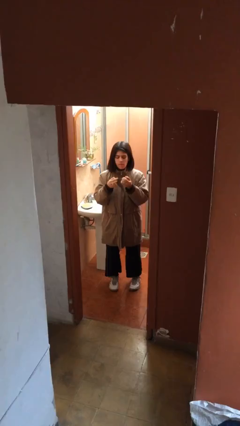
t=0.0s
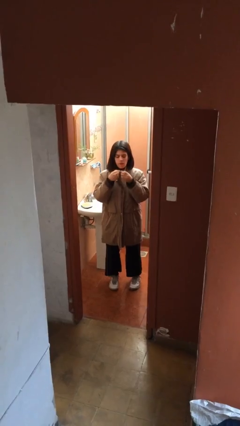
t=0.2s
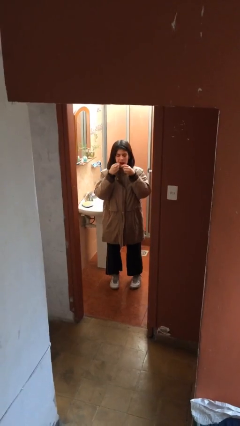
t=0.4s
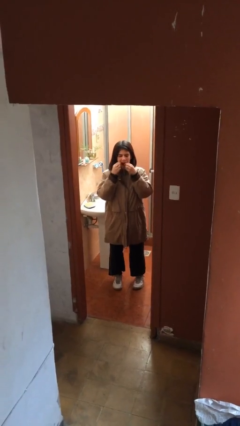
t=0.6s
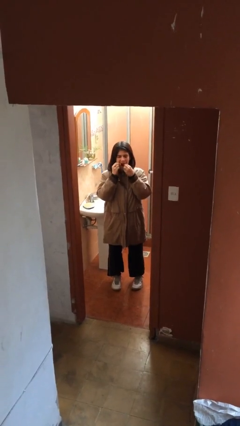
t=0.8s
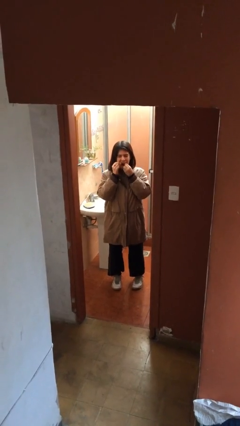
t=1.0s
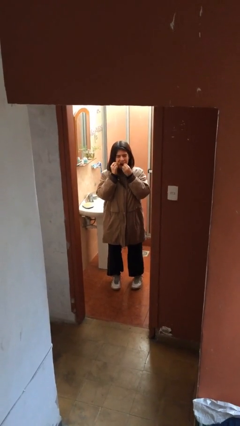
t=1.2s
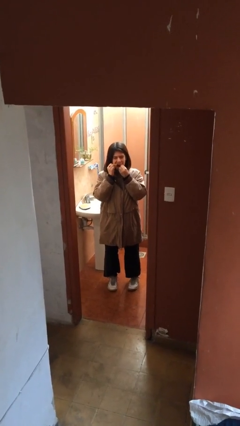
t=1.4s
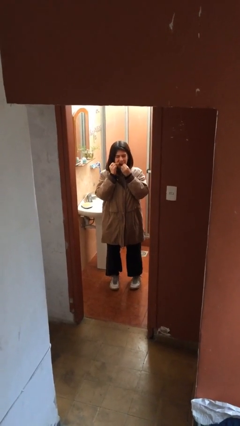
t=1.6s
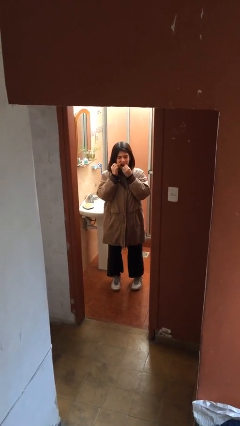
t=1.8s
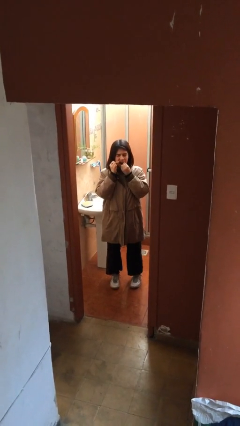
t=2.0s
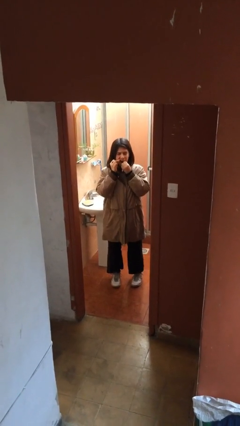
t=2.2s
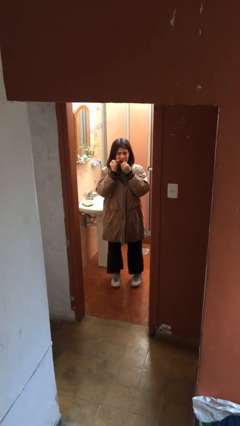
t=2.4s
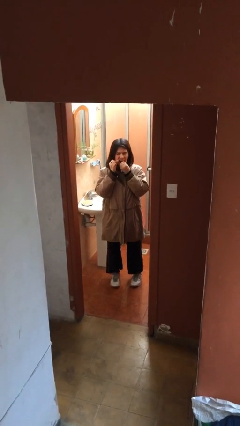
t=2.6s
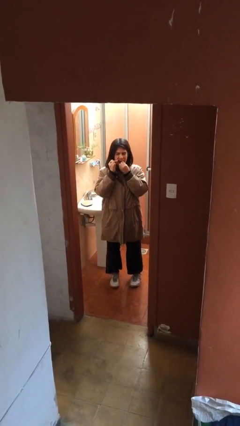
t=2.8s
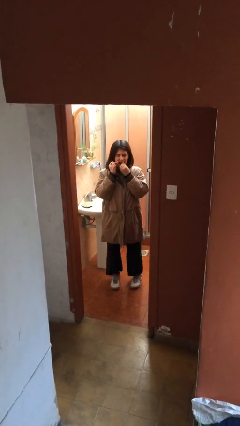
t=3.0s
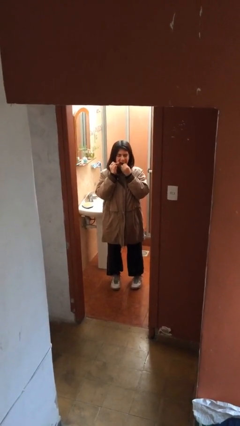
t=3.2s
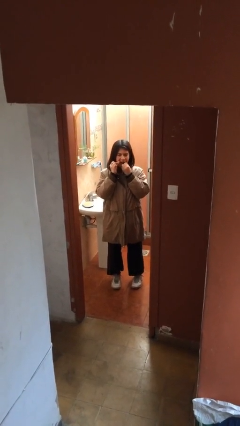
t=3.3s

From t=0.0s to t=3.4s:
person flosses

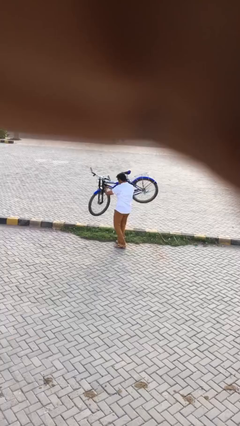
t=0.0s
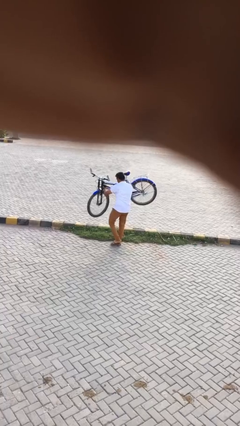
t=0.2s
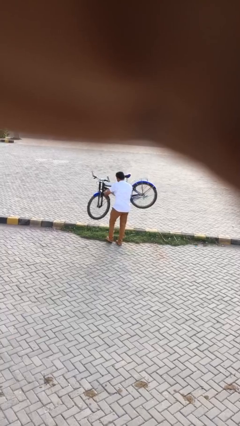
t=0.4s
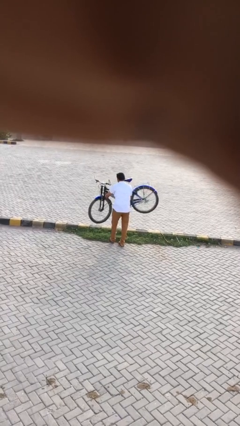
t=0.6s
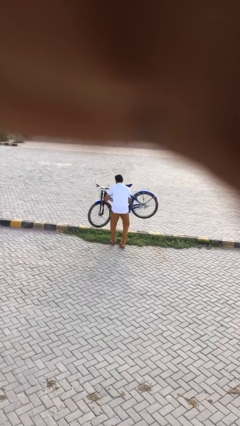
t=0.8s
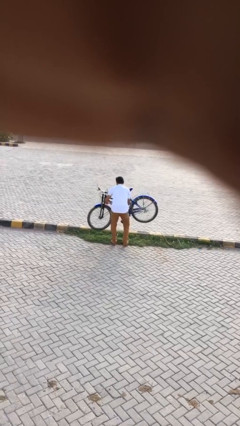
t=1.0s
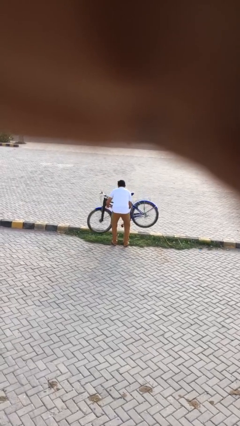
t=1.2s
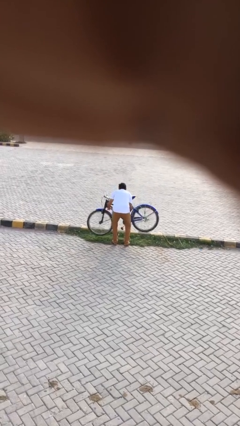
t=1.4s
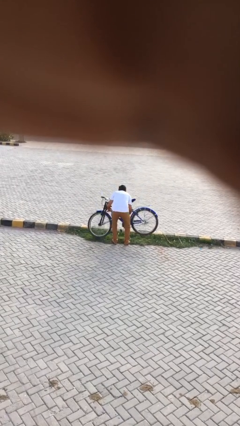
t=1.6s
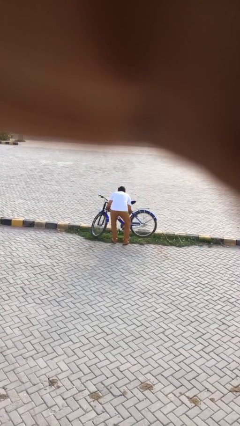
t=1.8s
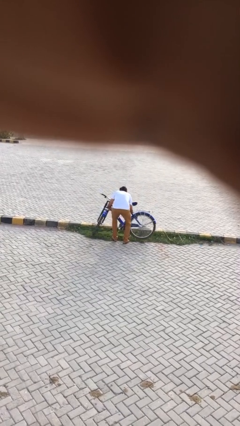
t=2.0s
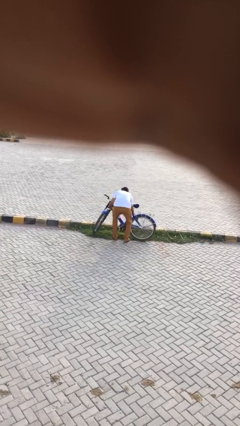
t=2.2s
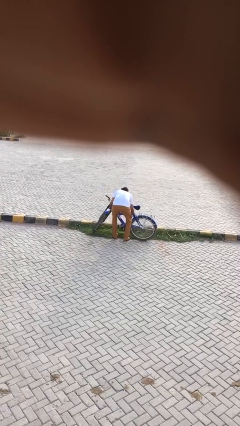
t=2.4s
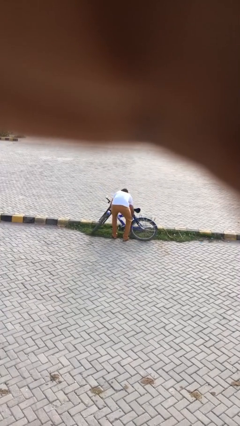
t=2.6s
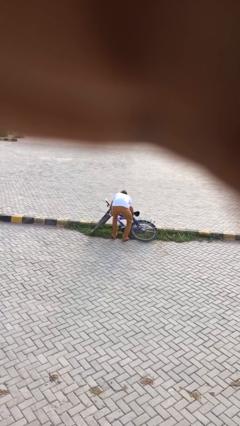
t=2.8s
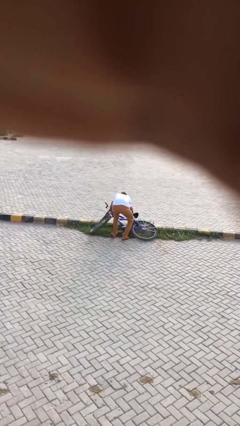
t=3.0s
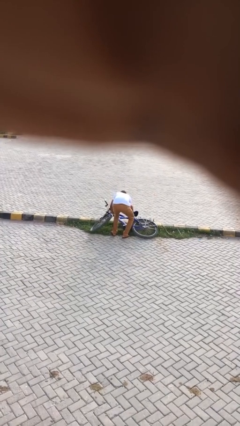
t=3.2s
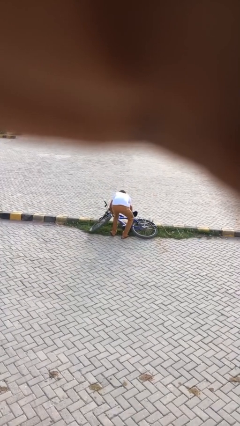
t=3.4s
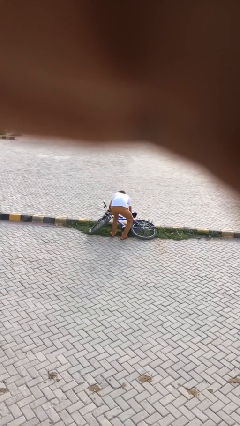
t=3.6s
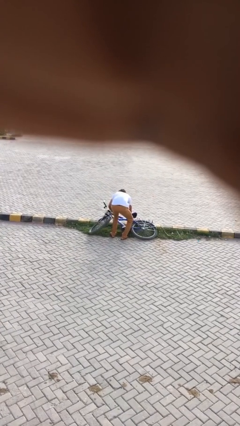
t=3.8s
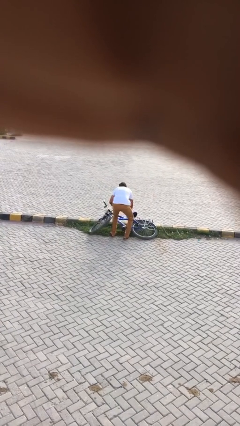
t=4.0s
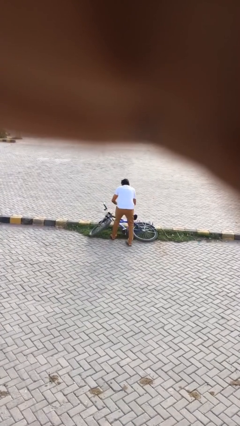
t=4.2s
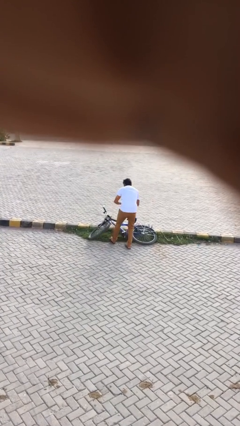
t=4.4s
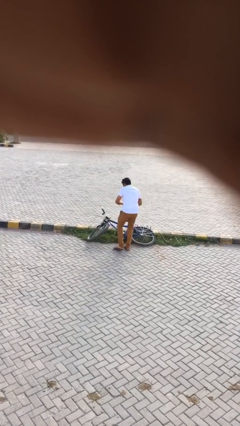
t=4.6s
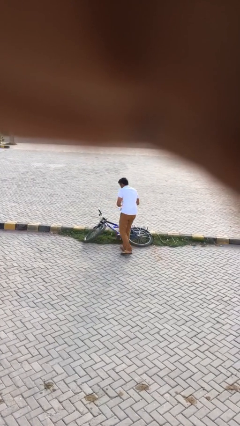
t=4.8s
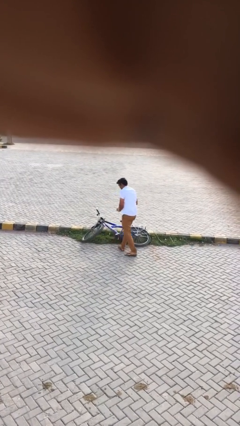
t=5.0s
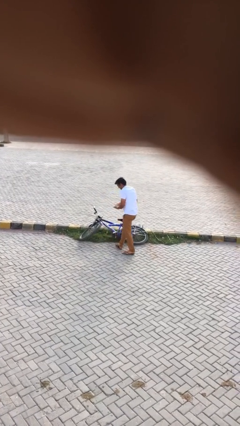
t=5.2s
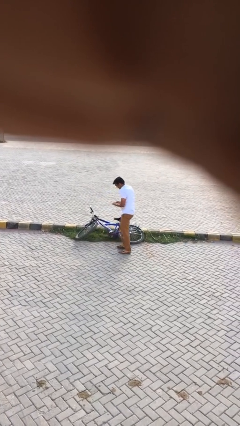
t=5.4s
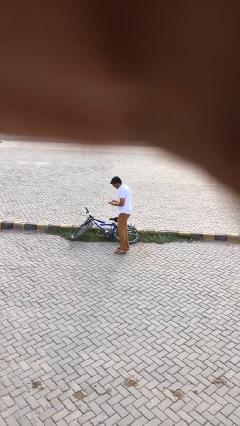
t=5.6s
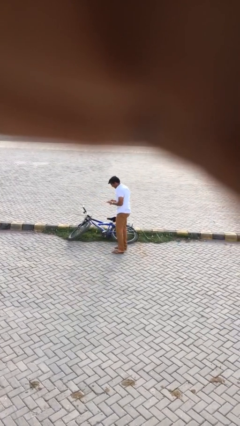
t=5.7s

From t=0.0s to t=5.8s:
person puts down object on floor

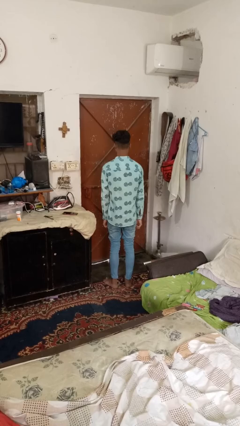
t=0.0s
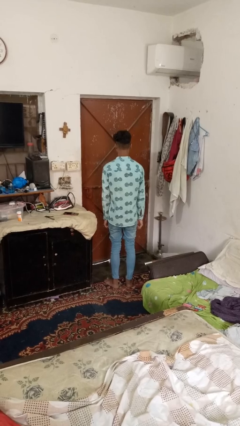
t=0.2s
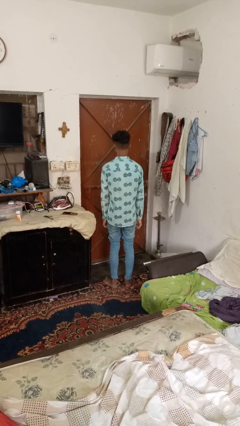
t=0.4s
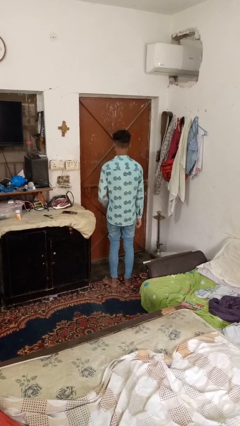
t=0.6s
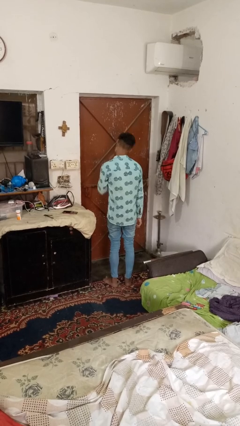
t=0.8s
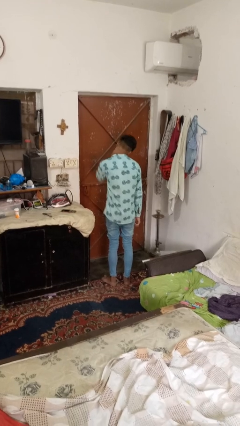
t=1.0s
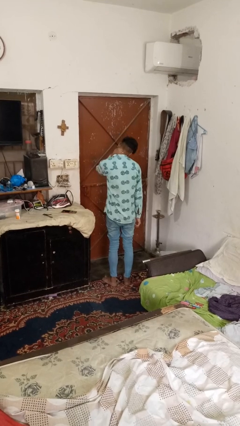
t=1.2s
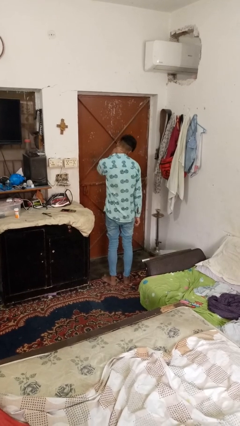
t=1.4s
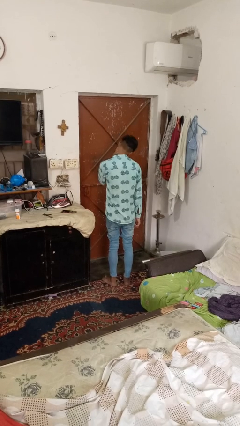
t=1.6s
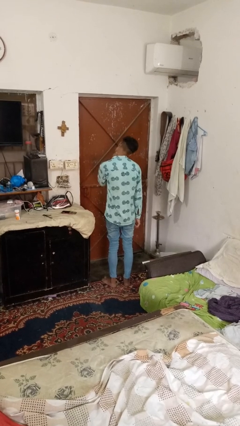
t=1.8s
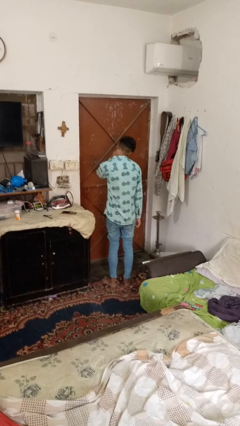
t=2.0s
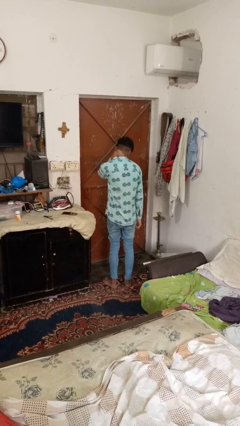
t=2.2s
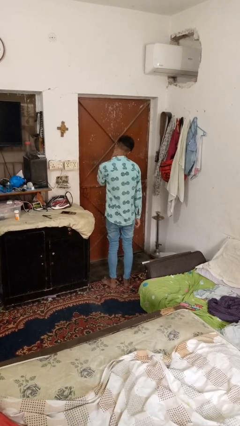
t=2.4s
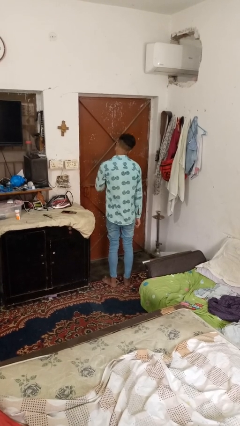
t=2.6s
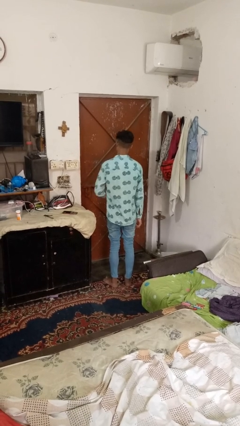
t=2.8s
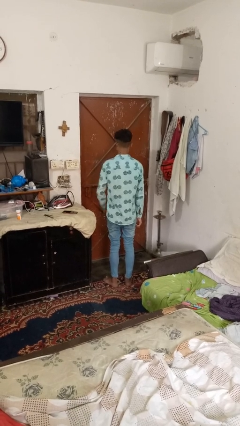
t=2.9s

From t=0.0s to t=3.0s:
person rubs neck

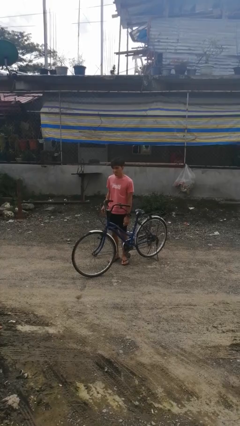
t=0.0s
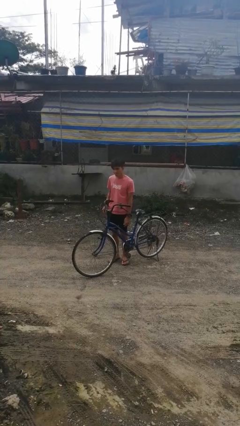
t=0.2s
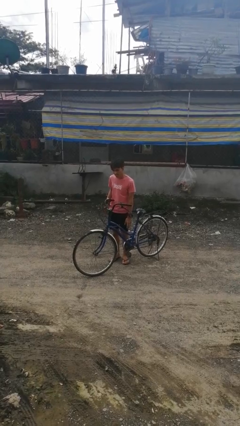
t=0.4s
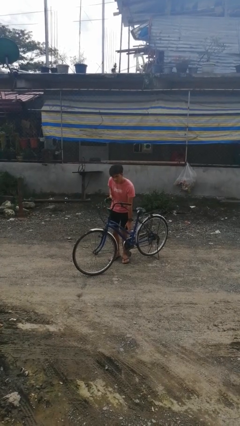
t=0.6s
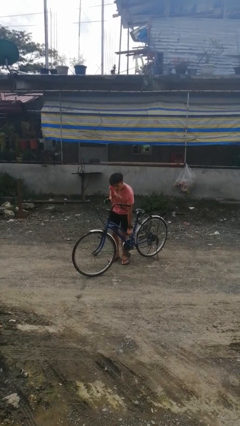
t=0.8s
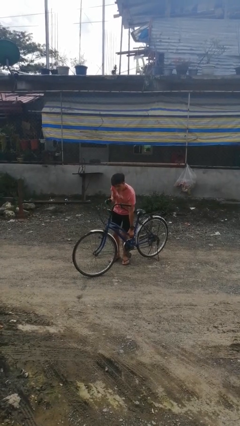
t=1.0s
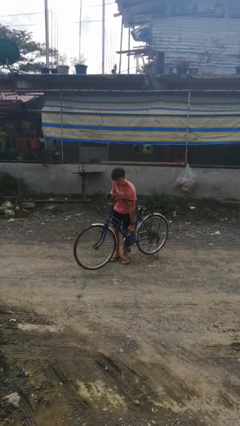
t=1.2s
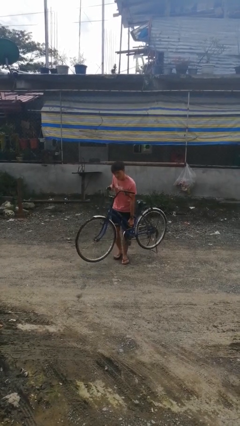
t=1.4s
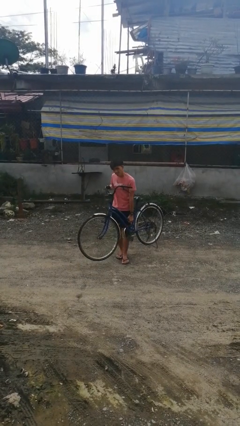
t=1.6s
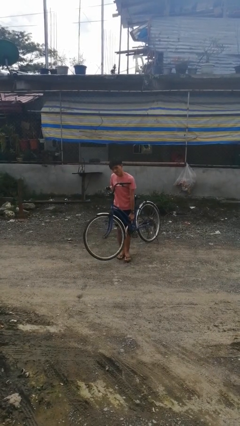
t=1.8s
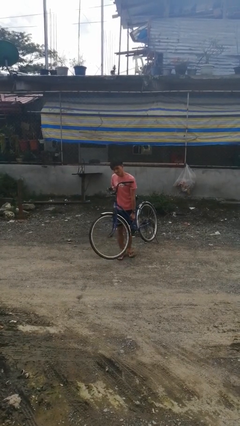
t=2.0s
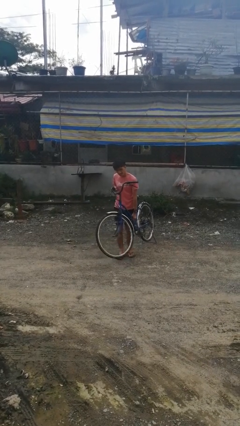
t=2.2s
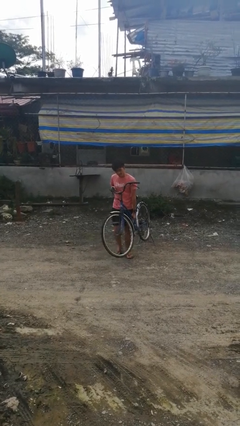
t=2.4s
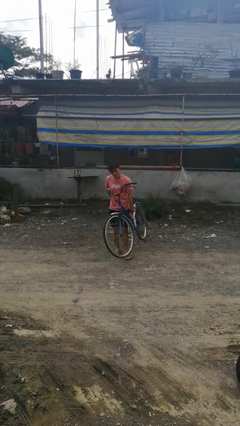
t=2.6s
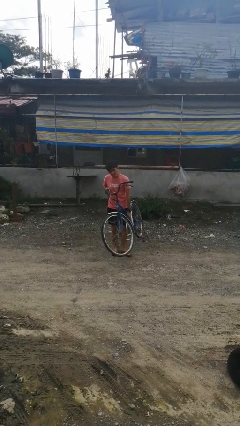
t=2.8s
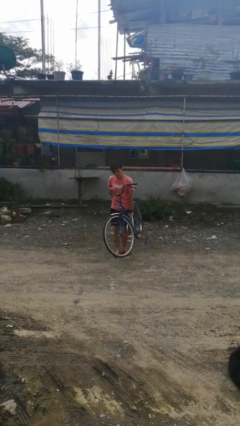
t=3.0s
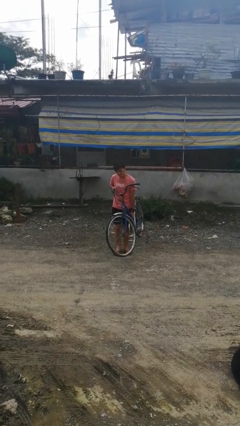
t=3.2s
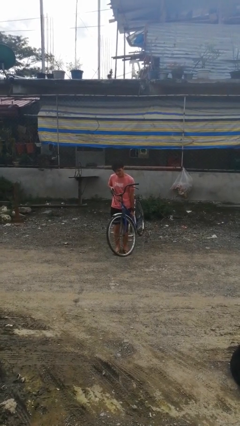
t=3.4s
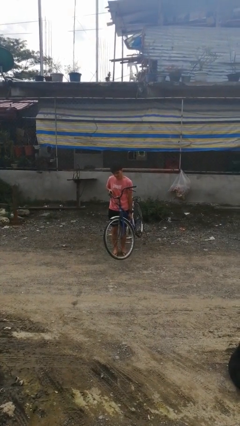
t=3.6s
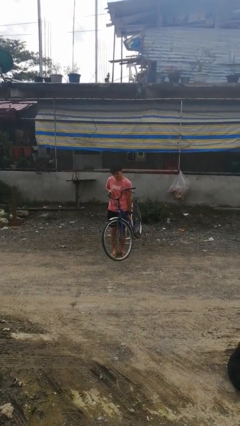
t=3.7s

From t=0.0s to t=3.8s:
person carries bicycle

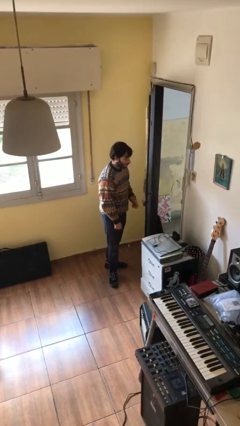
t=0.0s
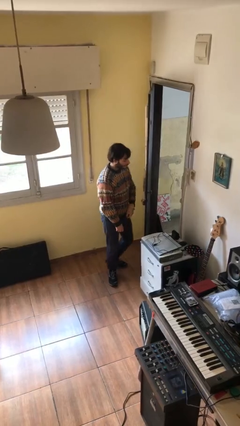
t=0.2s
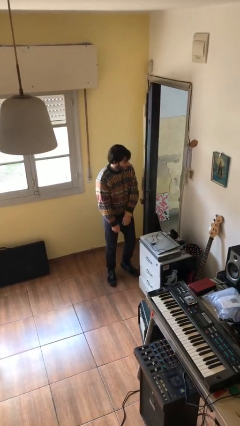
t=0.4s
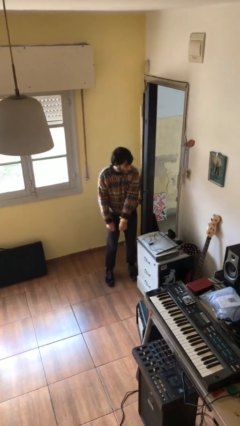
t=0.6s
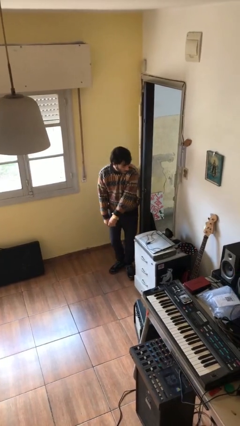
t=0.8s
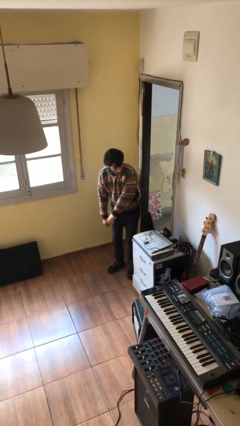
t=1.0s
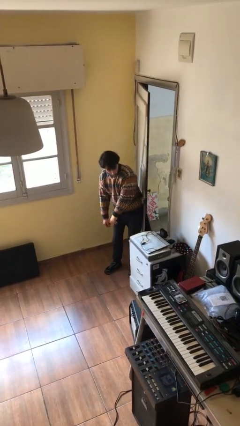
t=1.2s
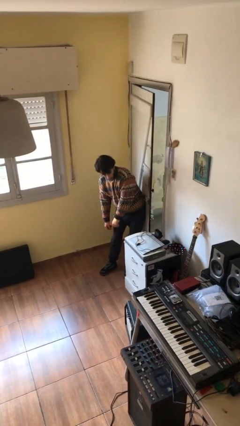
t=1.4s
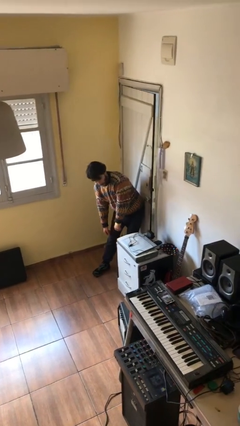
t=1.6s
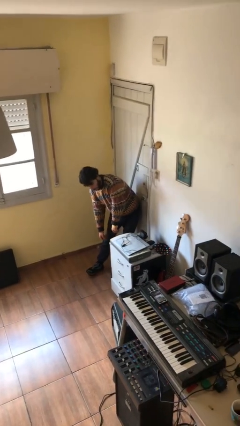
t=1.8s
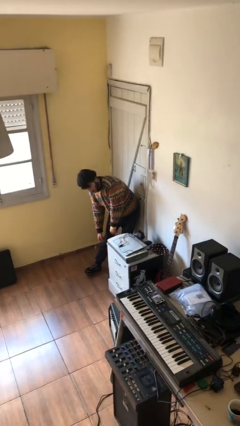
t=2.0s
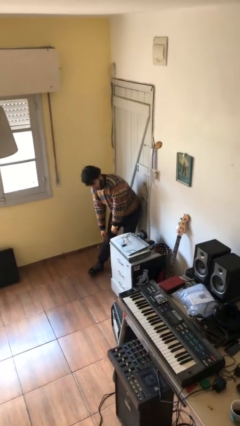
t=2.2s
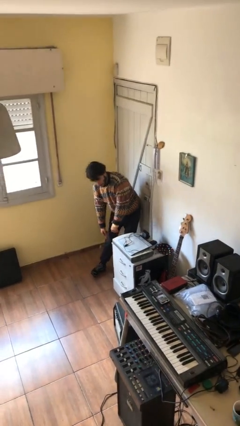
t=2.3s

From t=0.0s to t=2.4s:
person closes door with hip
